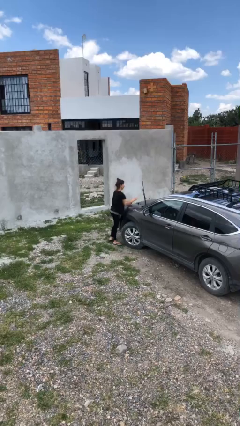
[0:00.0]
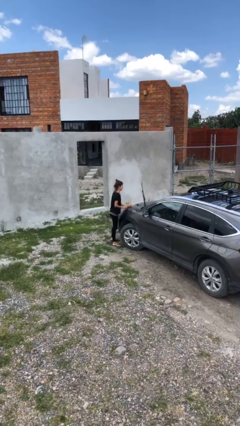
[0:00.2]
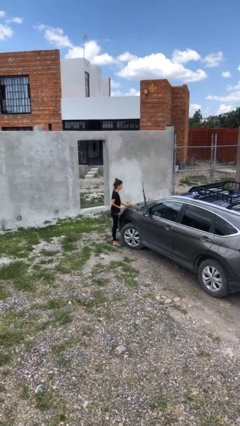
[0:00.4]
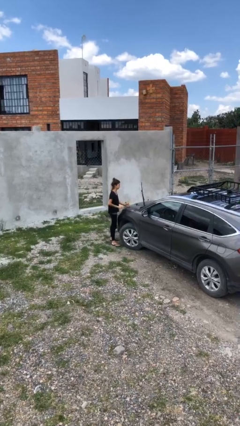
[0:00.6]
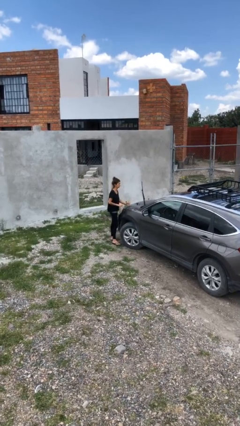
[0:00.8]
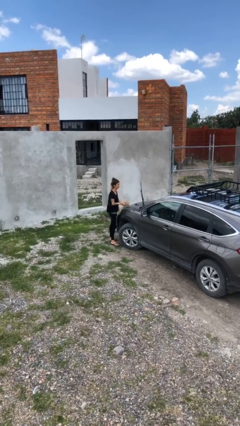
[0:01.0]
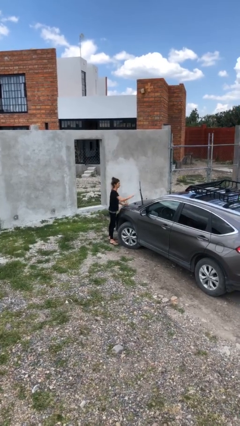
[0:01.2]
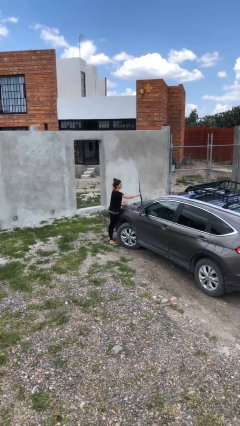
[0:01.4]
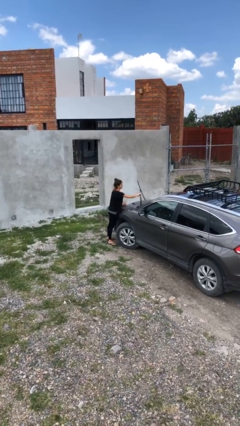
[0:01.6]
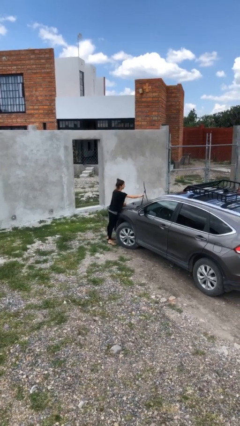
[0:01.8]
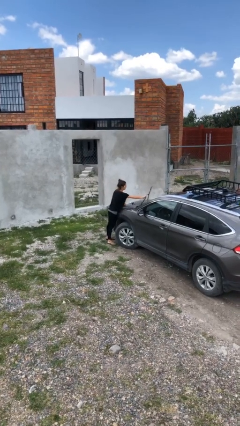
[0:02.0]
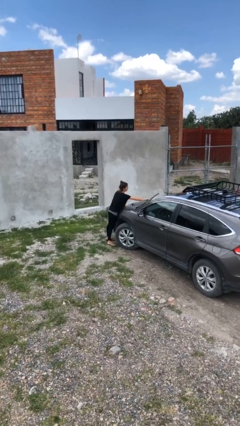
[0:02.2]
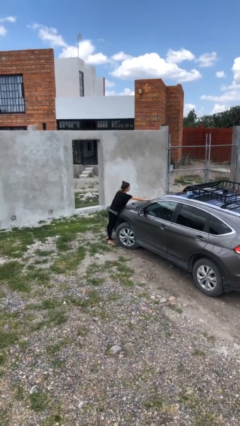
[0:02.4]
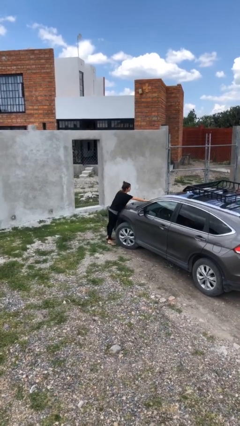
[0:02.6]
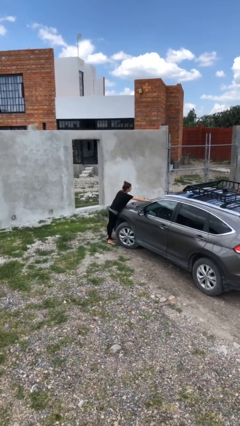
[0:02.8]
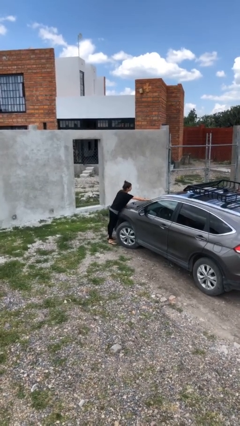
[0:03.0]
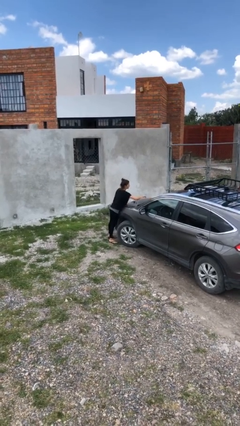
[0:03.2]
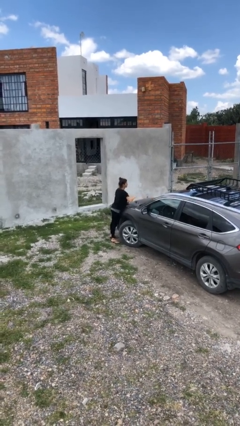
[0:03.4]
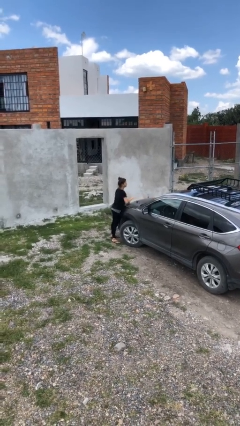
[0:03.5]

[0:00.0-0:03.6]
person flips down car wipers

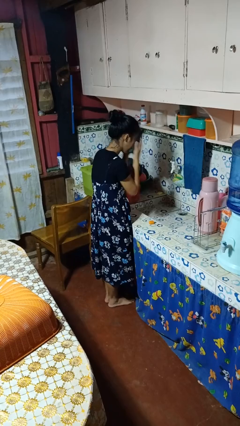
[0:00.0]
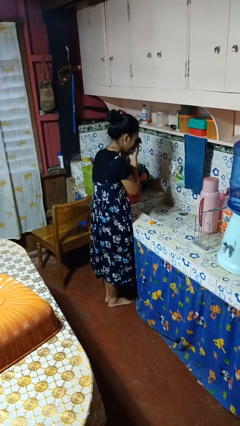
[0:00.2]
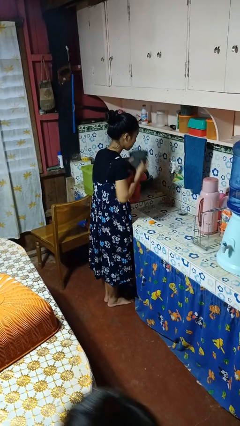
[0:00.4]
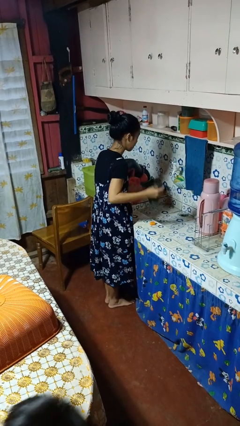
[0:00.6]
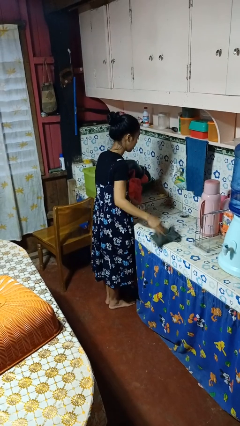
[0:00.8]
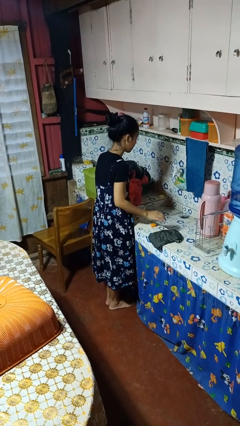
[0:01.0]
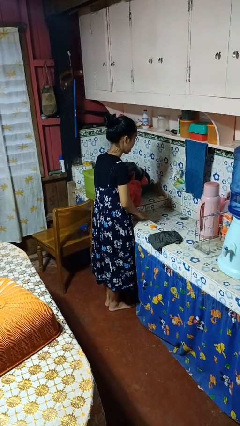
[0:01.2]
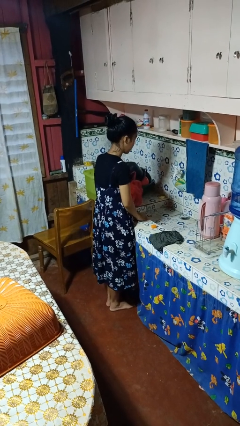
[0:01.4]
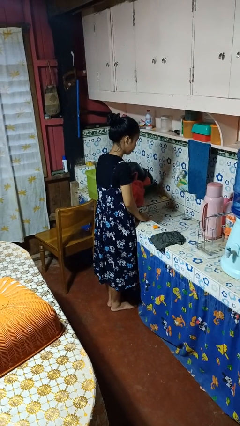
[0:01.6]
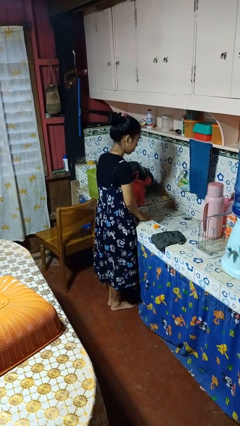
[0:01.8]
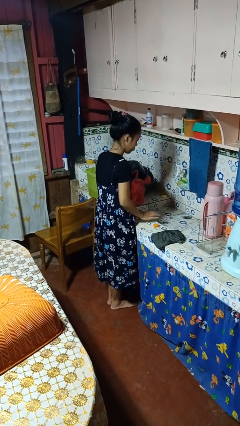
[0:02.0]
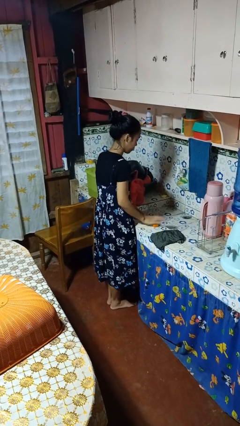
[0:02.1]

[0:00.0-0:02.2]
person dries face with towel

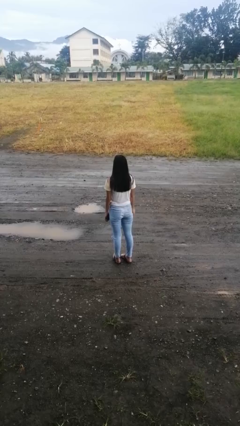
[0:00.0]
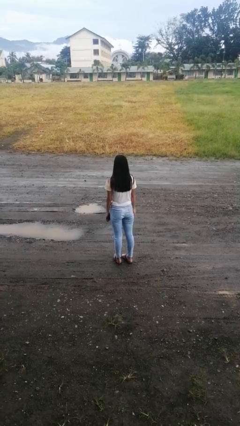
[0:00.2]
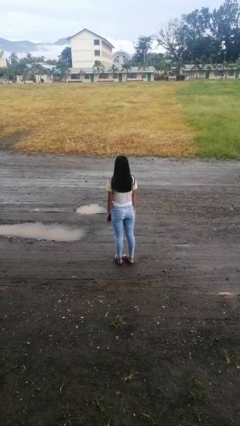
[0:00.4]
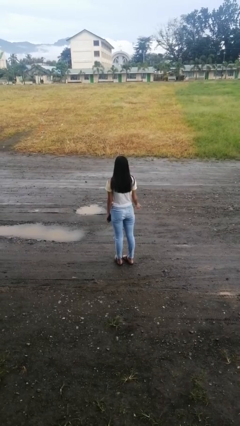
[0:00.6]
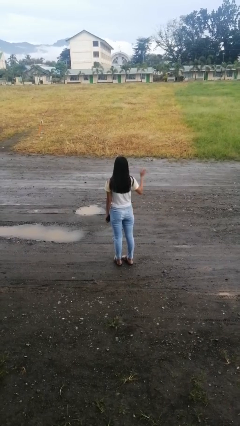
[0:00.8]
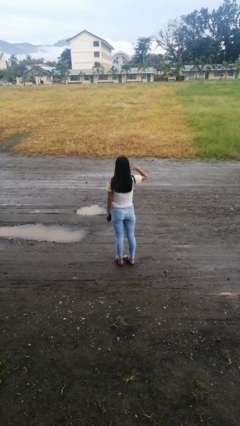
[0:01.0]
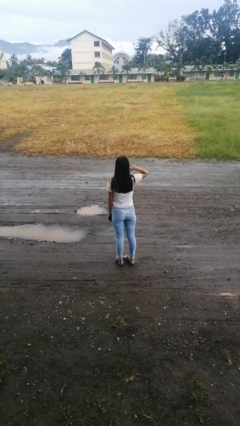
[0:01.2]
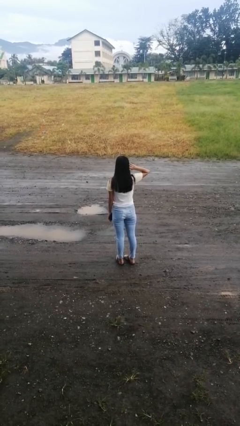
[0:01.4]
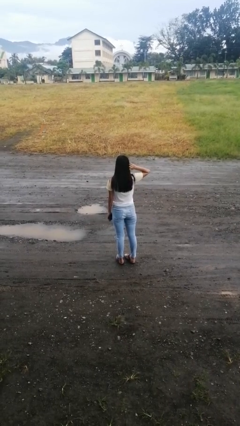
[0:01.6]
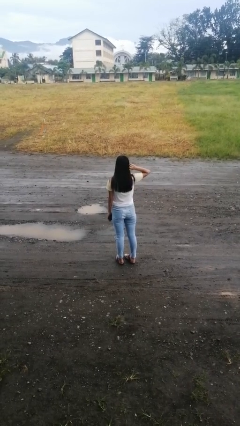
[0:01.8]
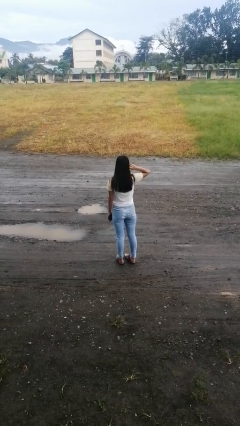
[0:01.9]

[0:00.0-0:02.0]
person scratches face

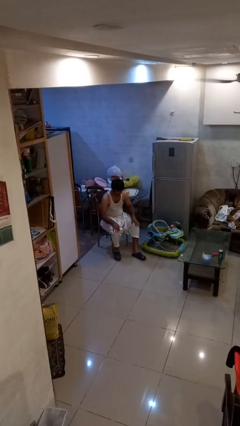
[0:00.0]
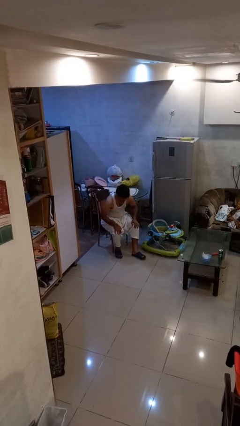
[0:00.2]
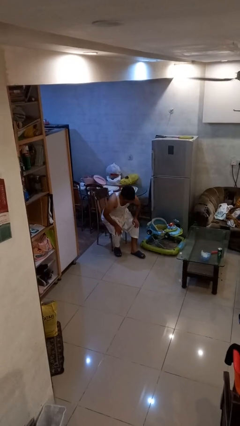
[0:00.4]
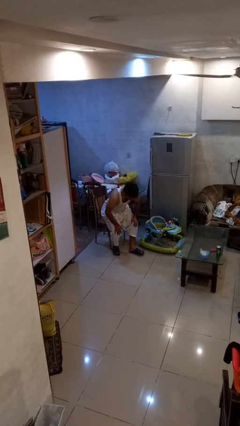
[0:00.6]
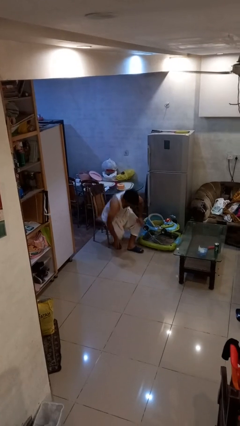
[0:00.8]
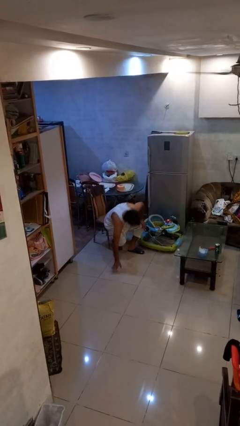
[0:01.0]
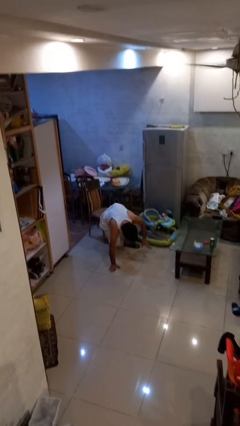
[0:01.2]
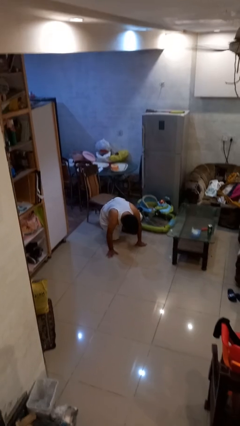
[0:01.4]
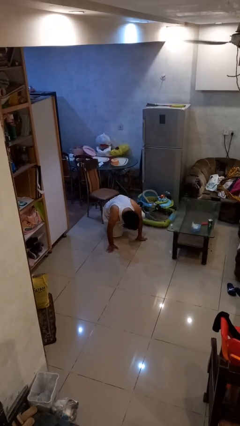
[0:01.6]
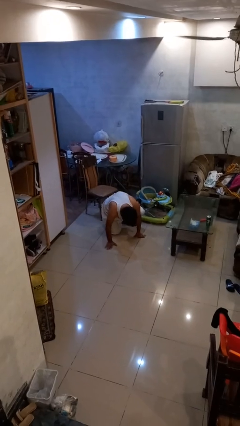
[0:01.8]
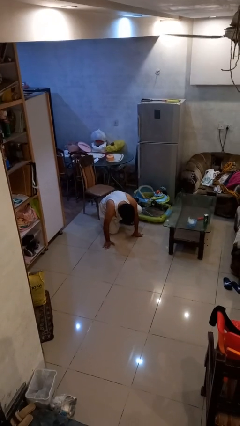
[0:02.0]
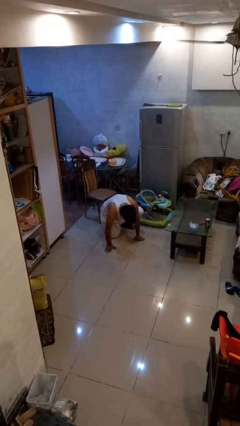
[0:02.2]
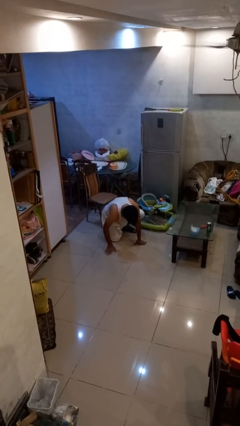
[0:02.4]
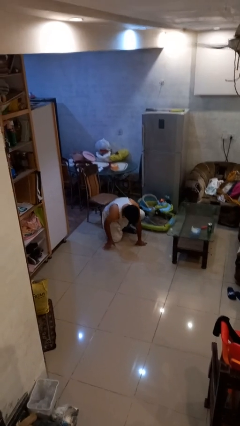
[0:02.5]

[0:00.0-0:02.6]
person falls from chair

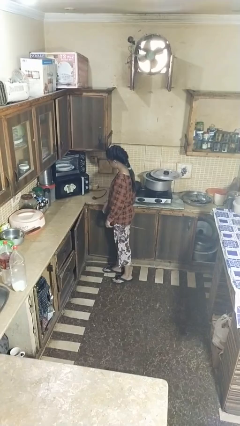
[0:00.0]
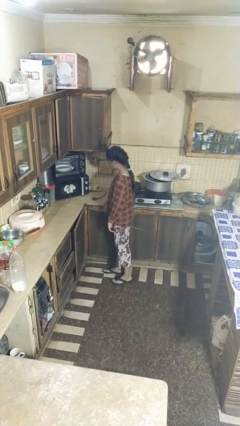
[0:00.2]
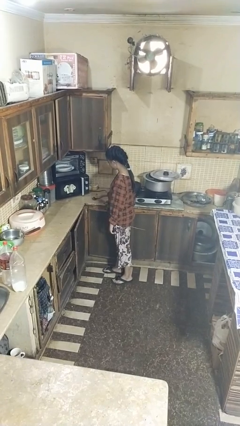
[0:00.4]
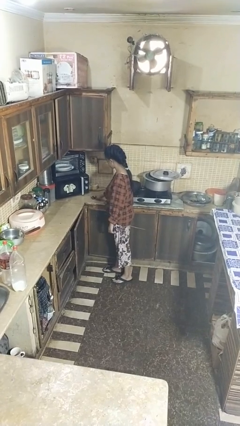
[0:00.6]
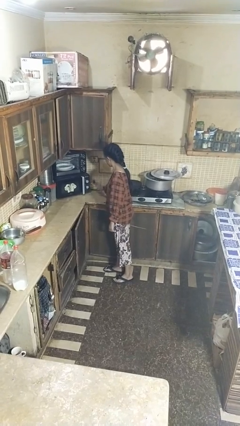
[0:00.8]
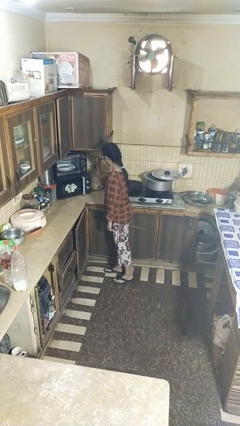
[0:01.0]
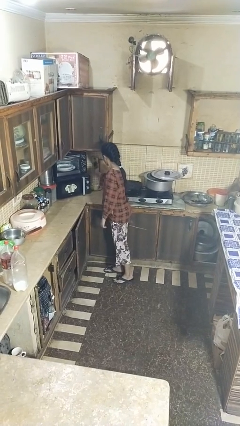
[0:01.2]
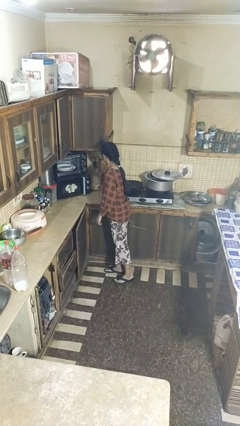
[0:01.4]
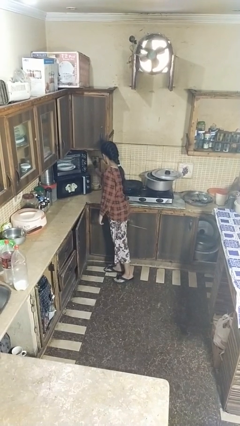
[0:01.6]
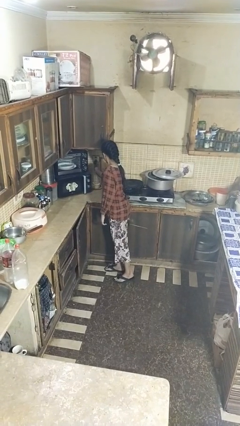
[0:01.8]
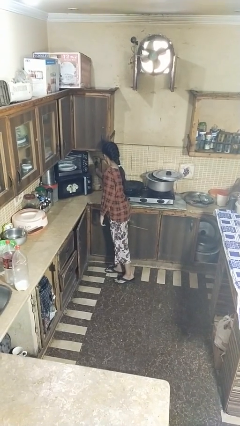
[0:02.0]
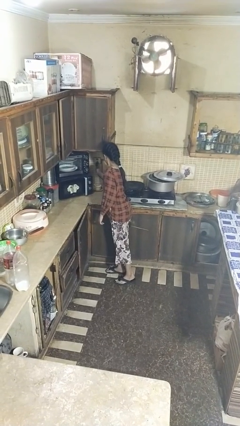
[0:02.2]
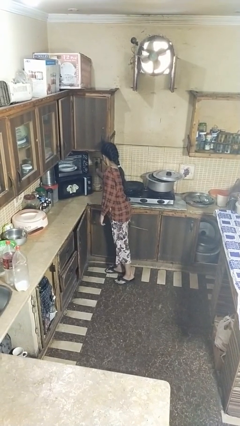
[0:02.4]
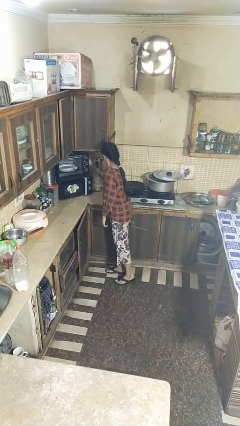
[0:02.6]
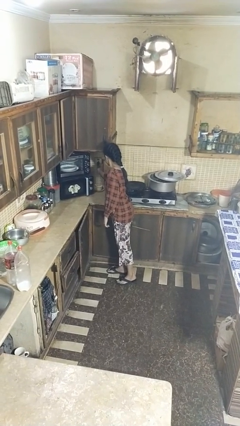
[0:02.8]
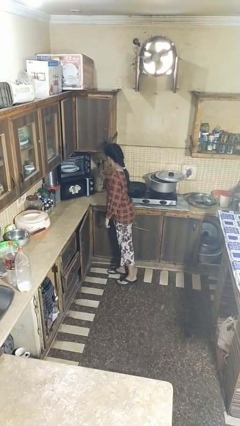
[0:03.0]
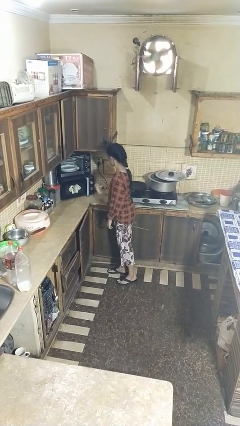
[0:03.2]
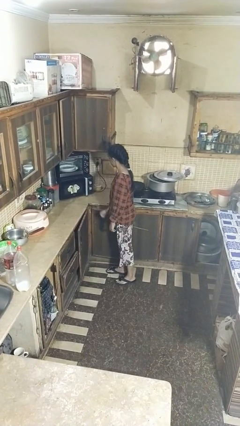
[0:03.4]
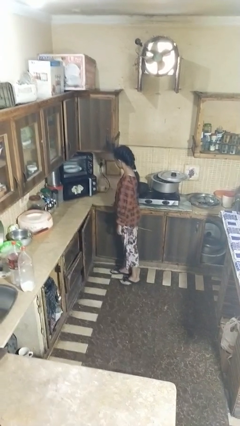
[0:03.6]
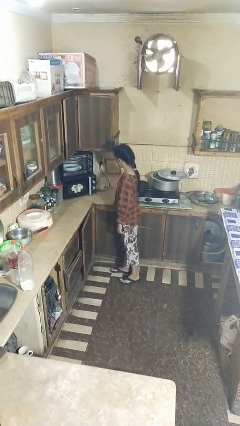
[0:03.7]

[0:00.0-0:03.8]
person plugs into electrical socket

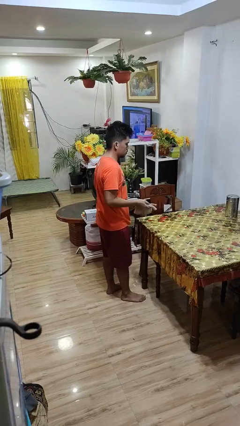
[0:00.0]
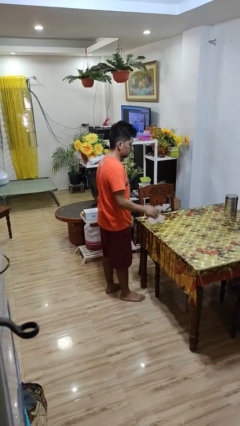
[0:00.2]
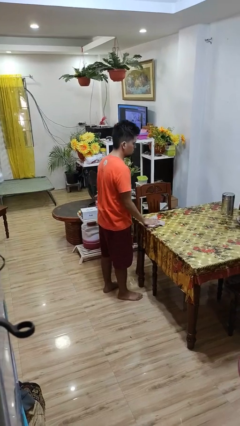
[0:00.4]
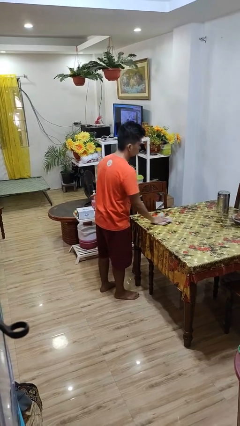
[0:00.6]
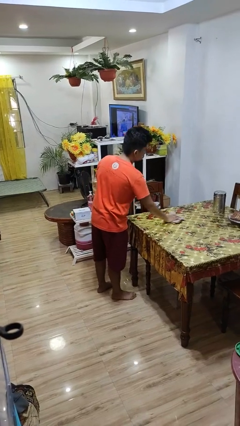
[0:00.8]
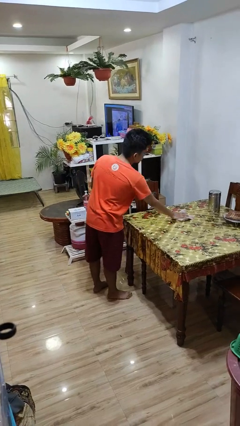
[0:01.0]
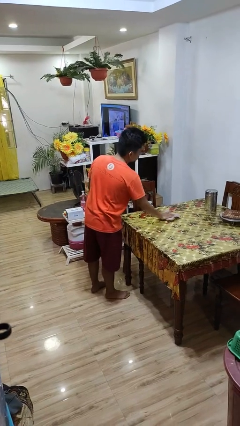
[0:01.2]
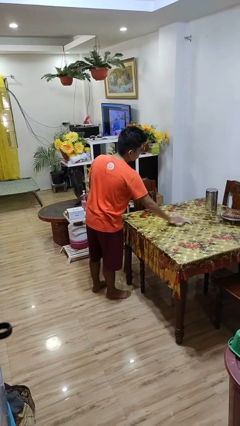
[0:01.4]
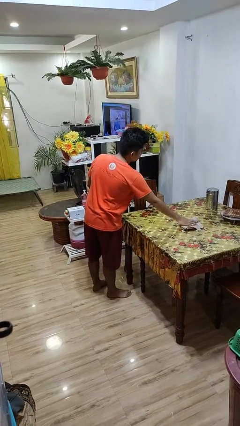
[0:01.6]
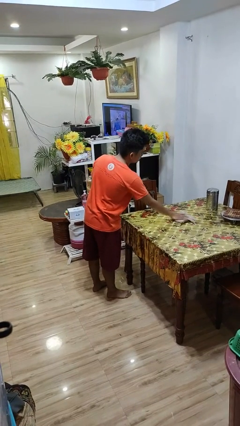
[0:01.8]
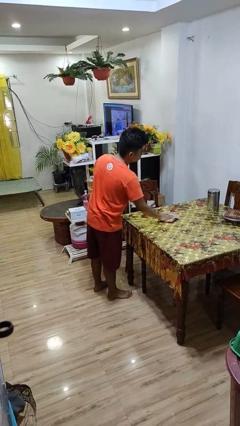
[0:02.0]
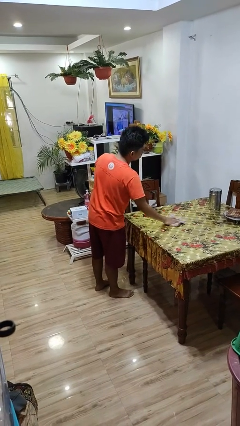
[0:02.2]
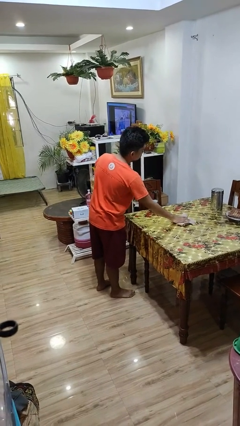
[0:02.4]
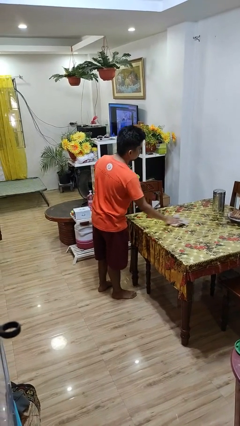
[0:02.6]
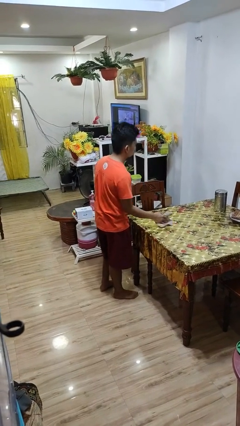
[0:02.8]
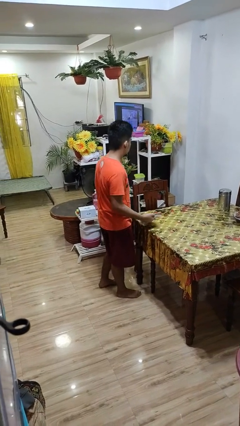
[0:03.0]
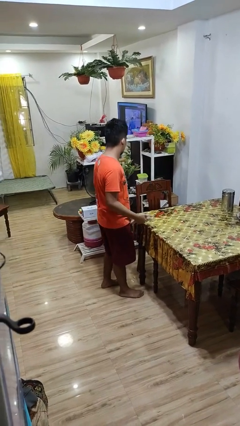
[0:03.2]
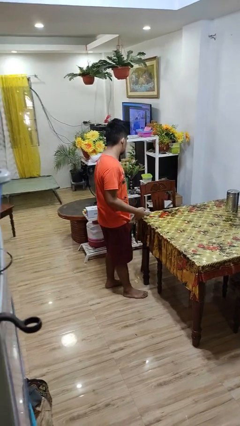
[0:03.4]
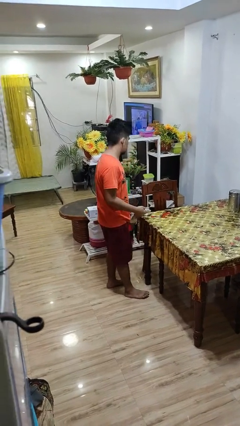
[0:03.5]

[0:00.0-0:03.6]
person cleans table with rag
